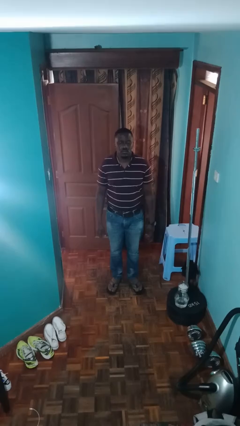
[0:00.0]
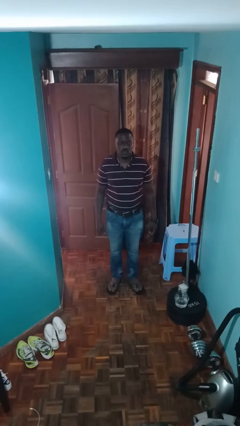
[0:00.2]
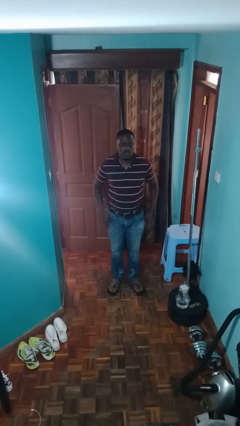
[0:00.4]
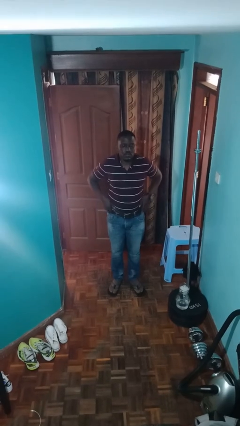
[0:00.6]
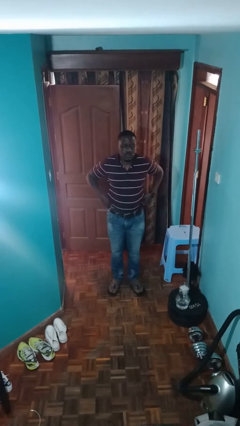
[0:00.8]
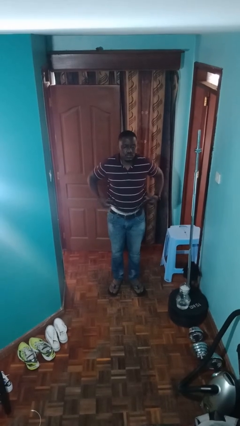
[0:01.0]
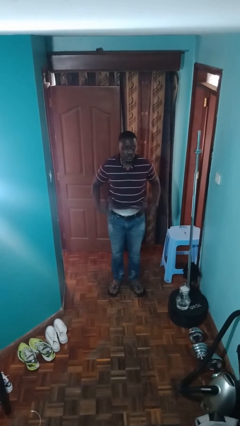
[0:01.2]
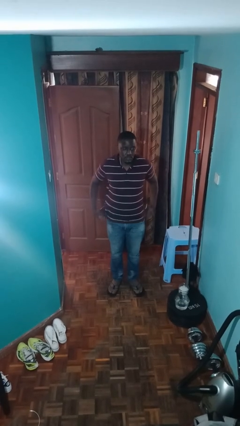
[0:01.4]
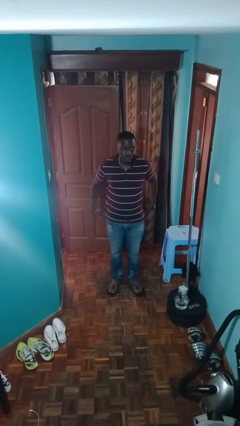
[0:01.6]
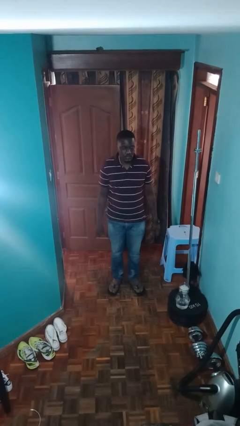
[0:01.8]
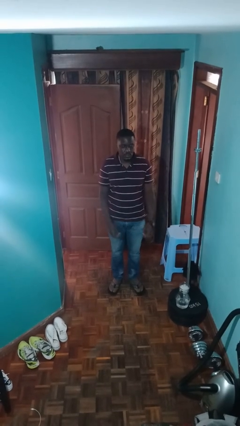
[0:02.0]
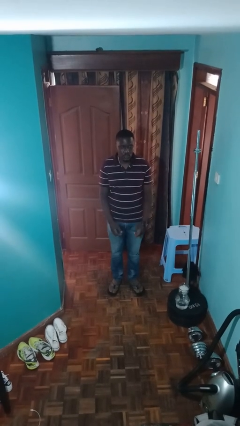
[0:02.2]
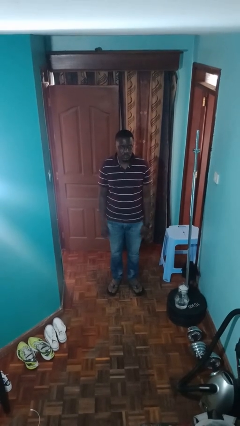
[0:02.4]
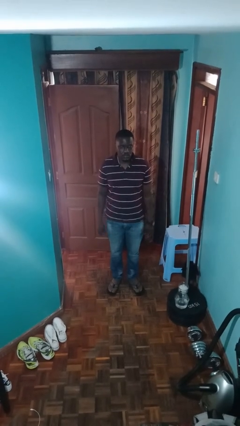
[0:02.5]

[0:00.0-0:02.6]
person untucks shirt

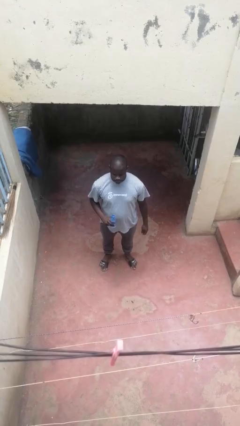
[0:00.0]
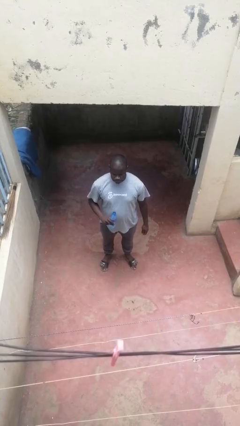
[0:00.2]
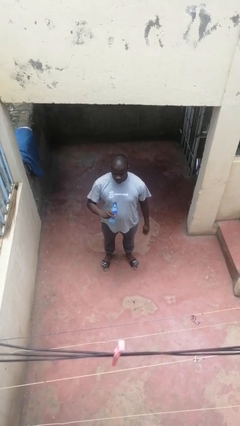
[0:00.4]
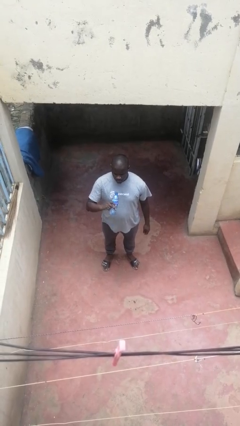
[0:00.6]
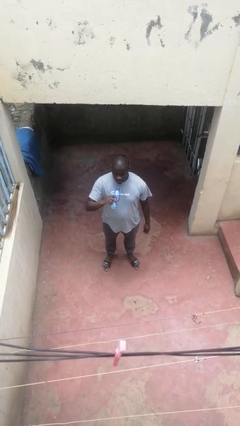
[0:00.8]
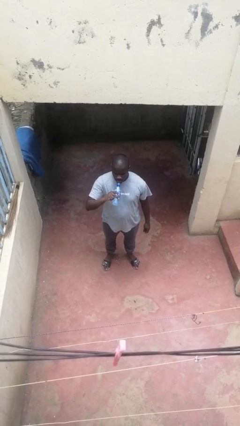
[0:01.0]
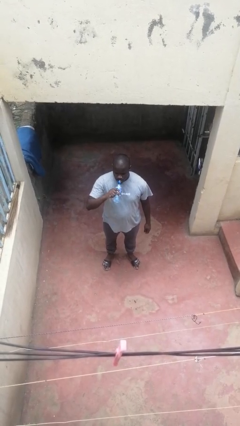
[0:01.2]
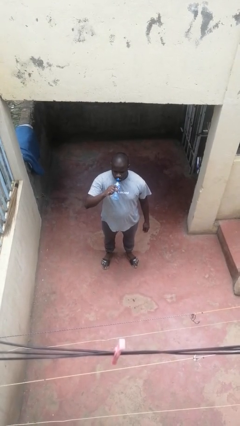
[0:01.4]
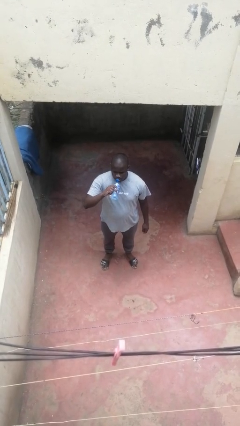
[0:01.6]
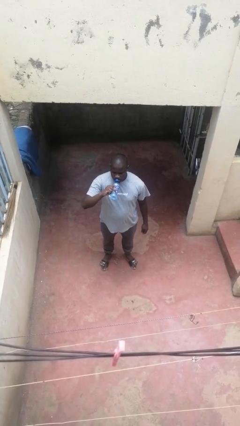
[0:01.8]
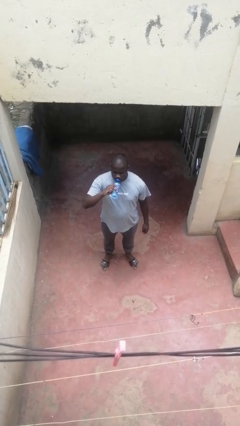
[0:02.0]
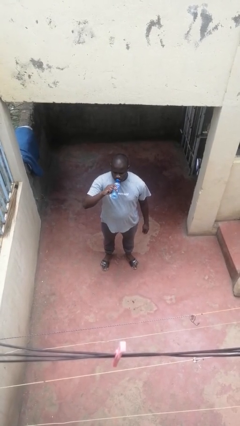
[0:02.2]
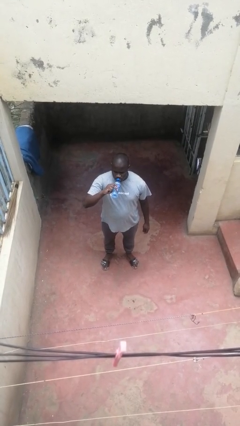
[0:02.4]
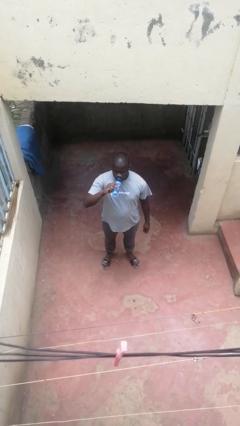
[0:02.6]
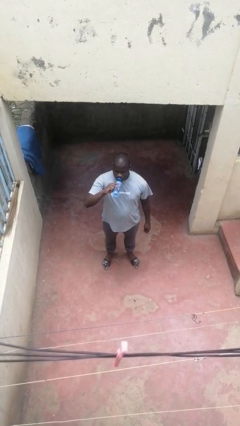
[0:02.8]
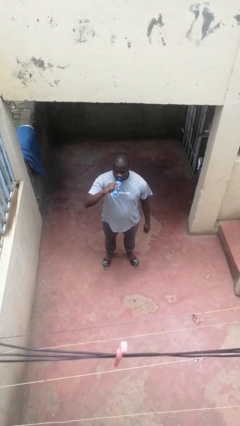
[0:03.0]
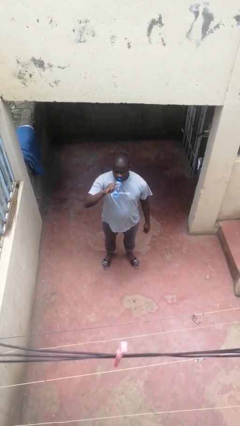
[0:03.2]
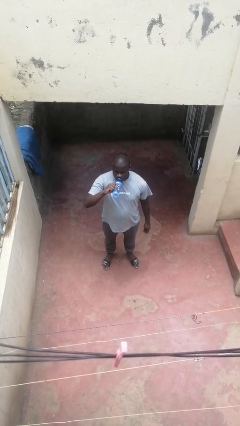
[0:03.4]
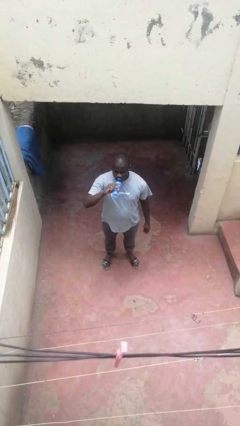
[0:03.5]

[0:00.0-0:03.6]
person drinks from bottle

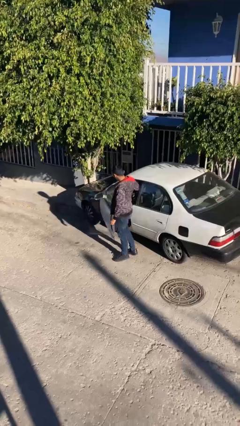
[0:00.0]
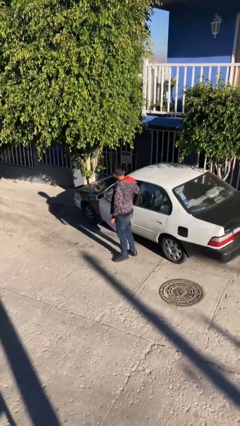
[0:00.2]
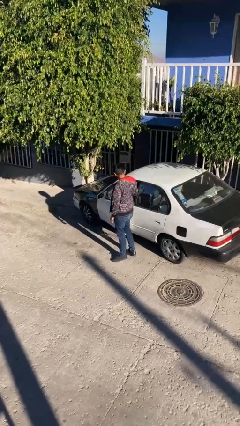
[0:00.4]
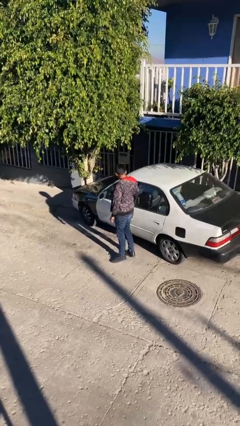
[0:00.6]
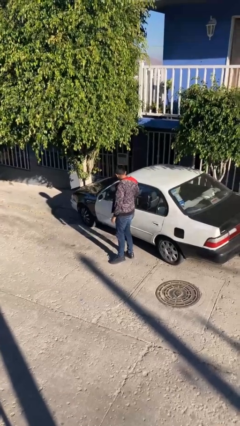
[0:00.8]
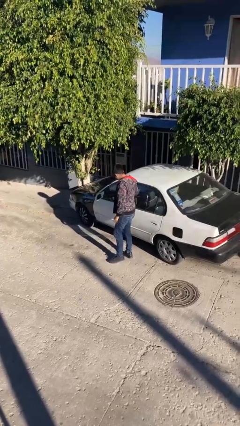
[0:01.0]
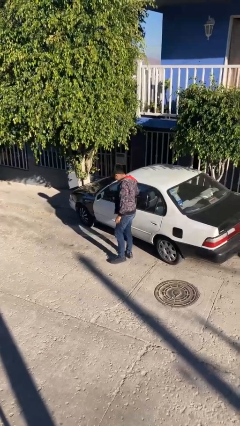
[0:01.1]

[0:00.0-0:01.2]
person closes car door

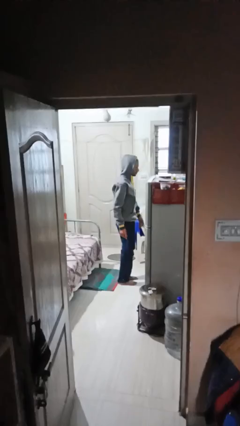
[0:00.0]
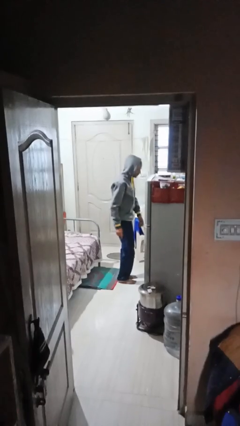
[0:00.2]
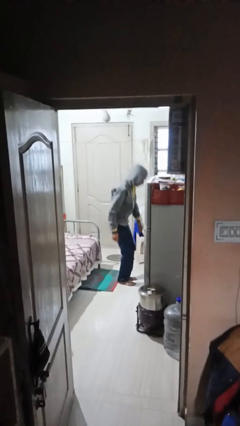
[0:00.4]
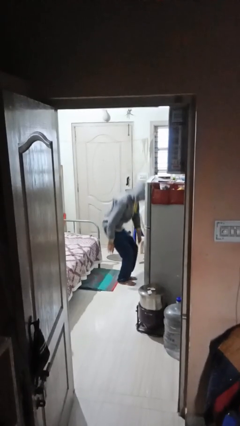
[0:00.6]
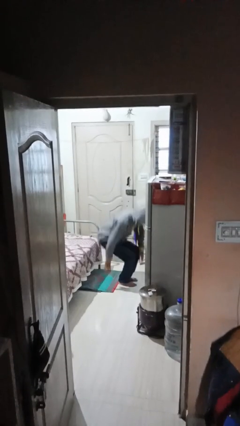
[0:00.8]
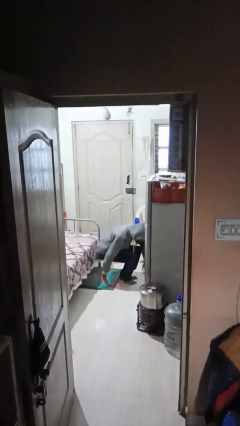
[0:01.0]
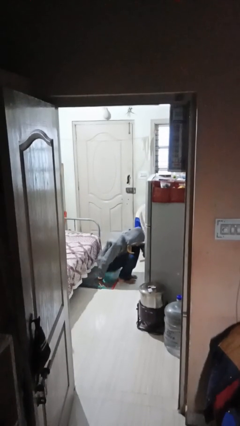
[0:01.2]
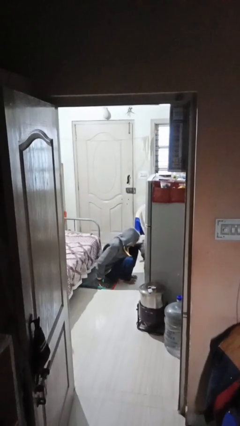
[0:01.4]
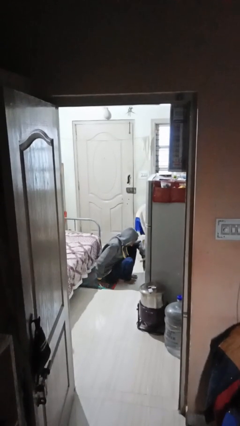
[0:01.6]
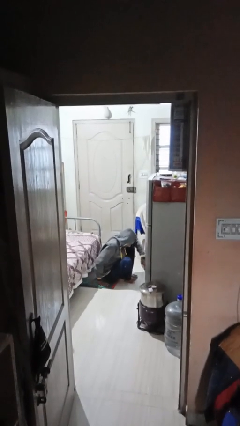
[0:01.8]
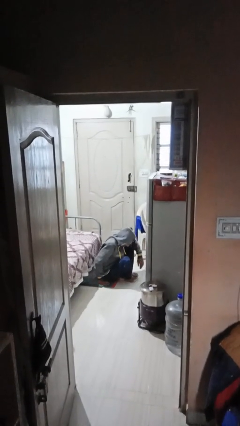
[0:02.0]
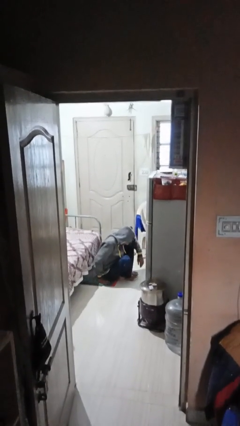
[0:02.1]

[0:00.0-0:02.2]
person sits down

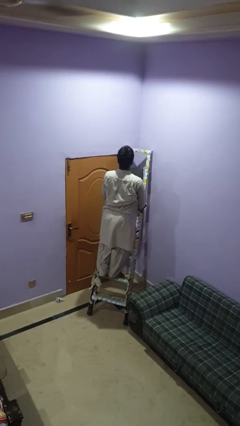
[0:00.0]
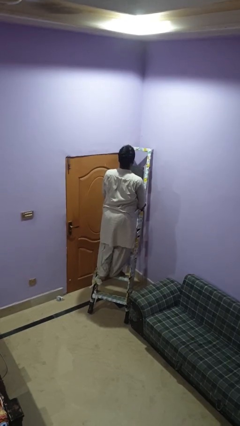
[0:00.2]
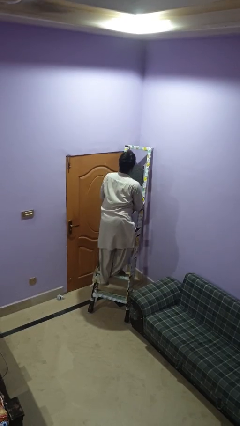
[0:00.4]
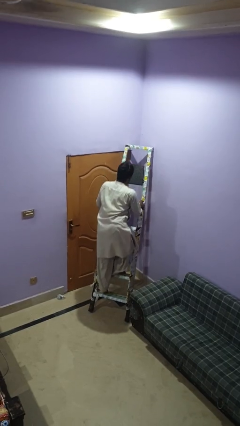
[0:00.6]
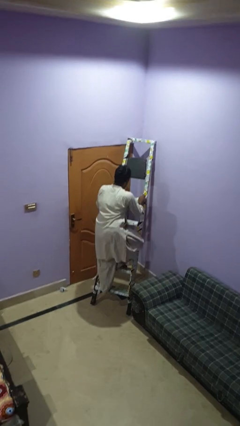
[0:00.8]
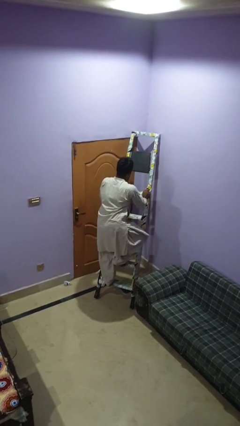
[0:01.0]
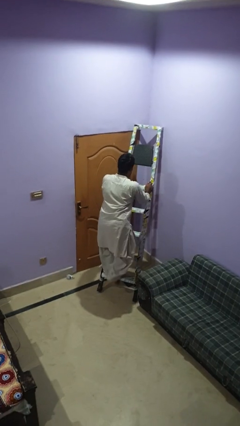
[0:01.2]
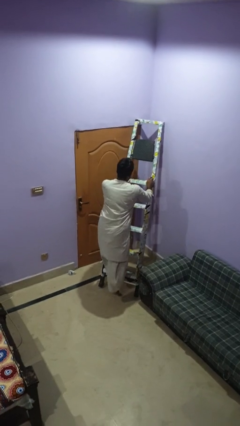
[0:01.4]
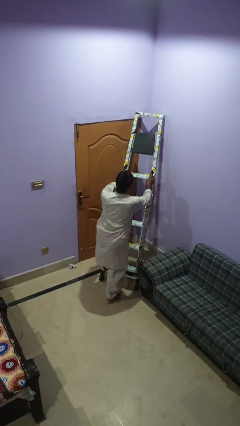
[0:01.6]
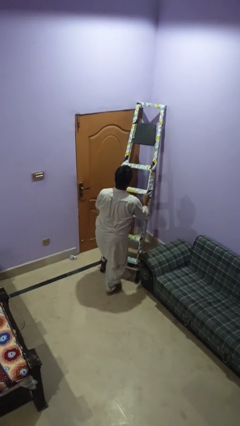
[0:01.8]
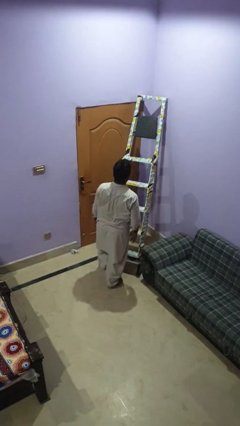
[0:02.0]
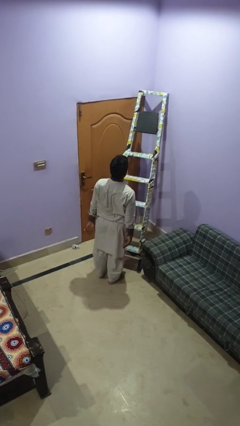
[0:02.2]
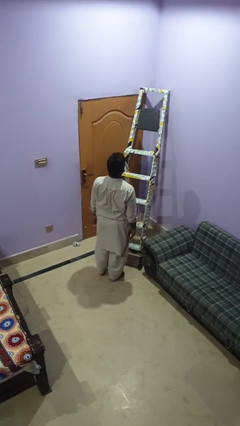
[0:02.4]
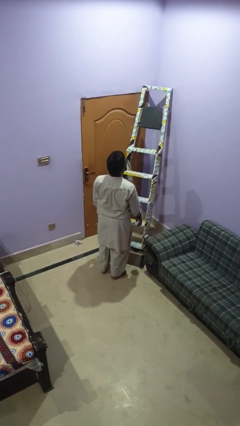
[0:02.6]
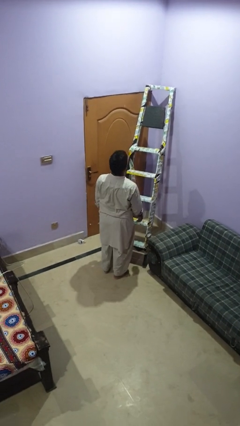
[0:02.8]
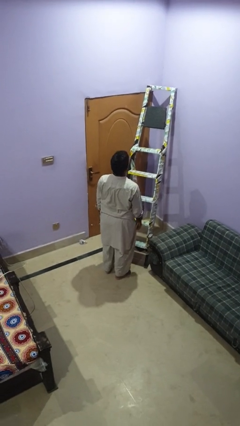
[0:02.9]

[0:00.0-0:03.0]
person climbs down ladder

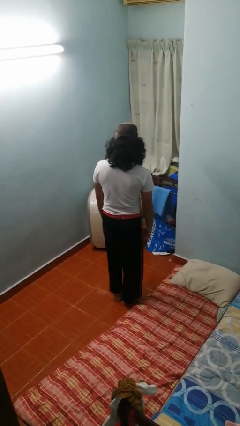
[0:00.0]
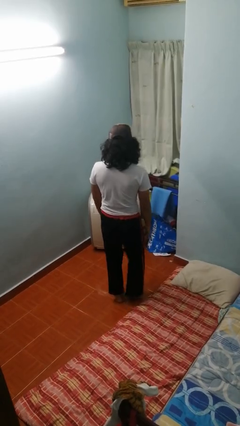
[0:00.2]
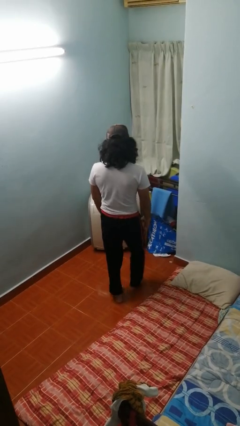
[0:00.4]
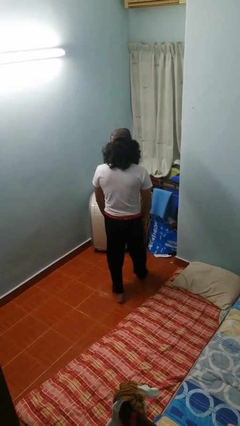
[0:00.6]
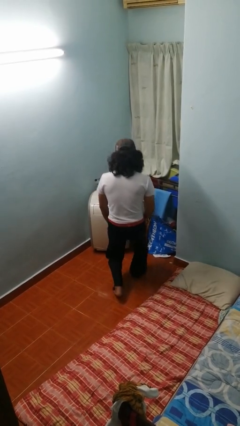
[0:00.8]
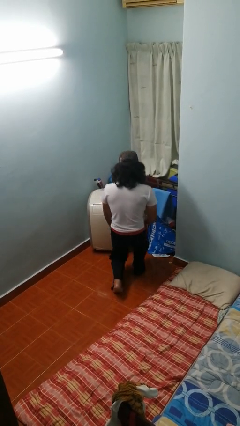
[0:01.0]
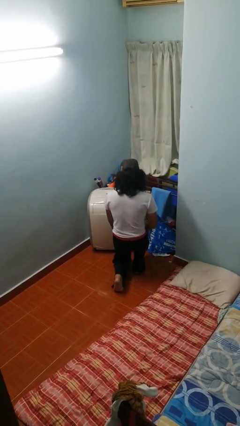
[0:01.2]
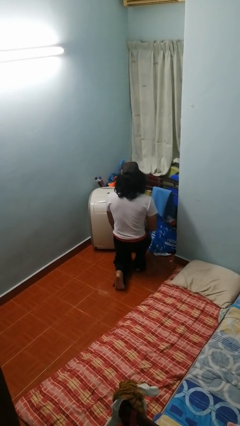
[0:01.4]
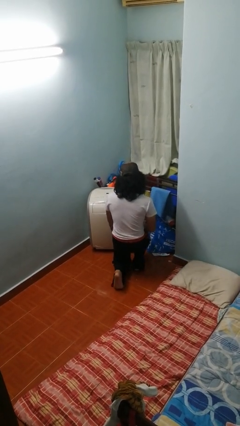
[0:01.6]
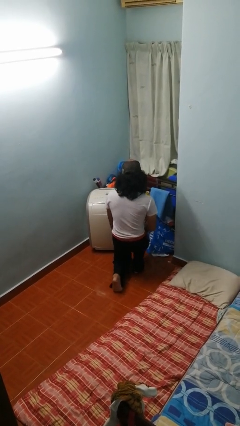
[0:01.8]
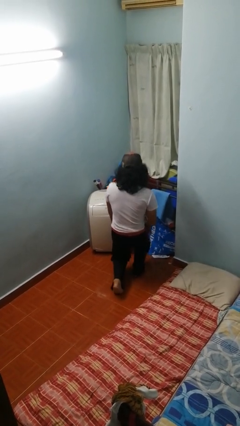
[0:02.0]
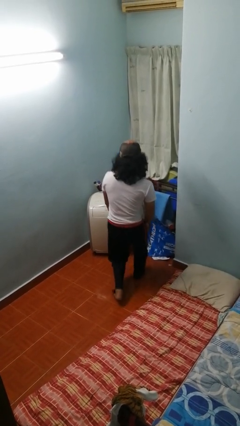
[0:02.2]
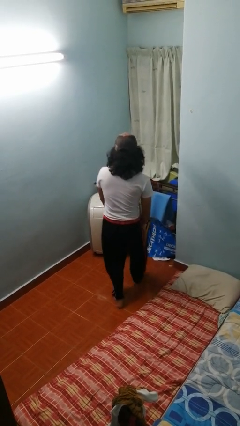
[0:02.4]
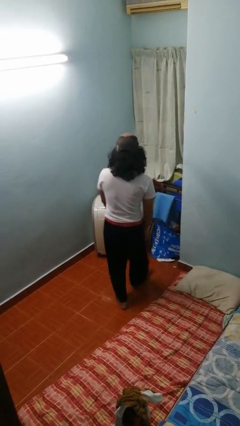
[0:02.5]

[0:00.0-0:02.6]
person exercises with lunges

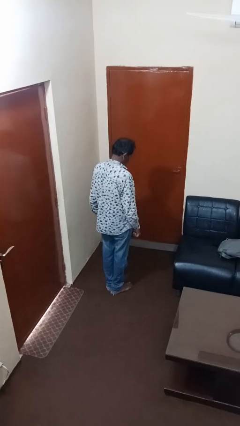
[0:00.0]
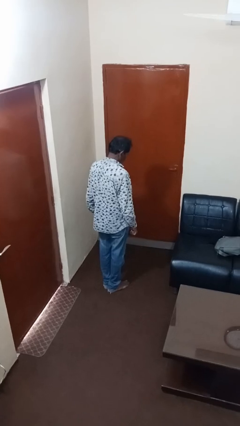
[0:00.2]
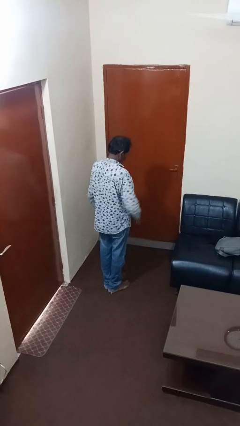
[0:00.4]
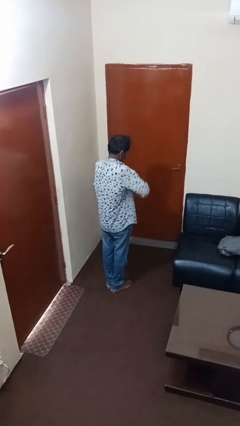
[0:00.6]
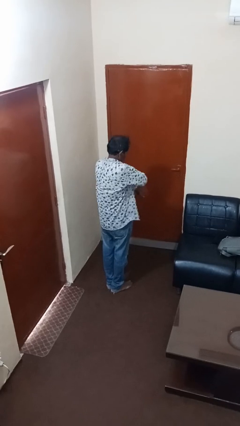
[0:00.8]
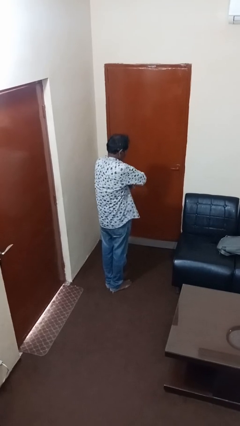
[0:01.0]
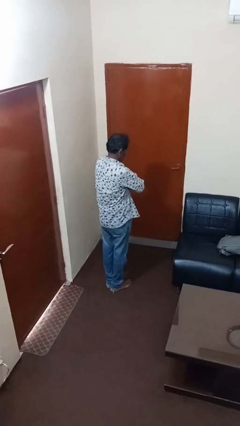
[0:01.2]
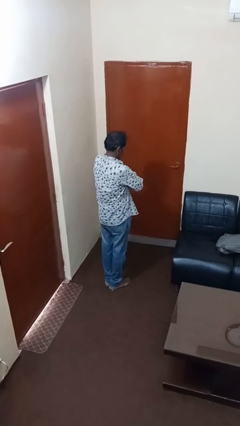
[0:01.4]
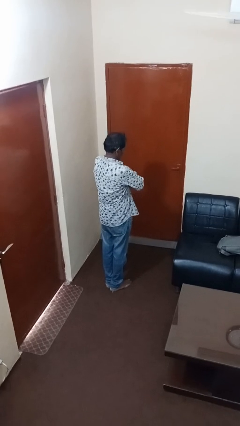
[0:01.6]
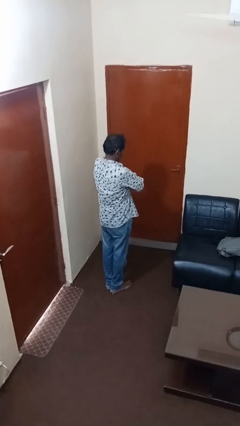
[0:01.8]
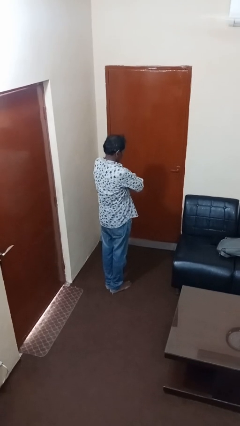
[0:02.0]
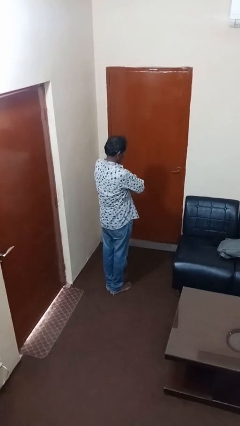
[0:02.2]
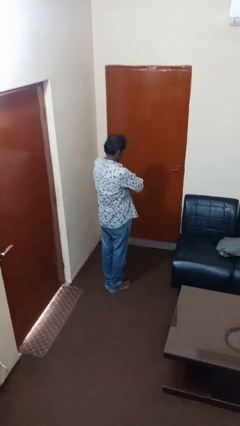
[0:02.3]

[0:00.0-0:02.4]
person crosses arms
